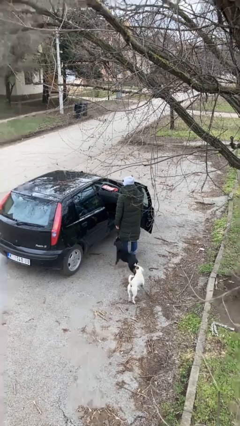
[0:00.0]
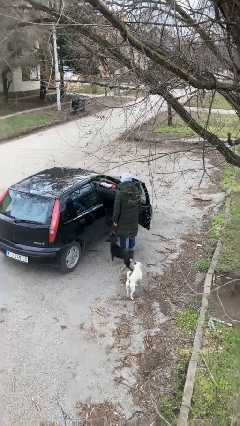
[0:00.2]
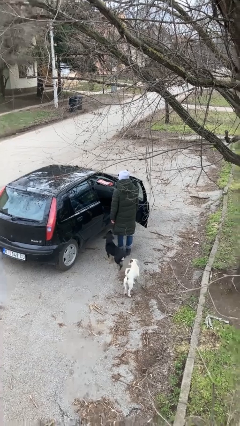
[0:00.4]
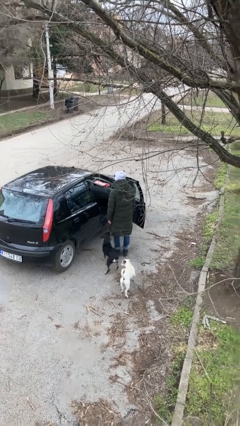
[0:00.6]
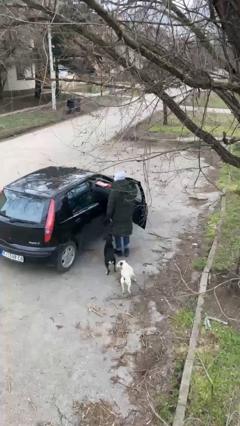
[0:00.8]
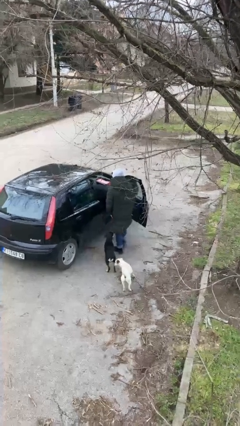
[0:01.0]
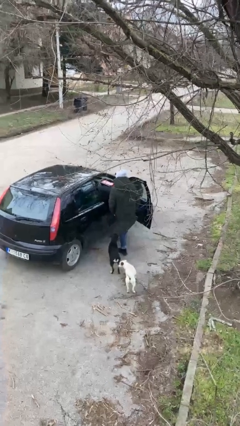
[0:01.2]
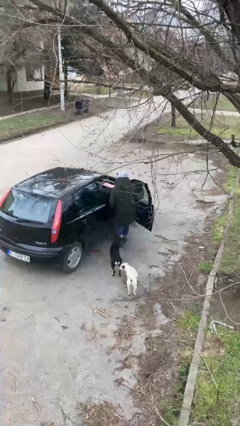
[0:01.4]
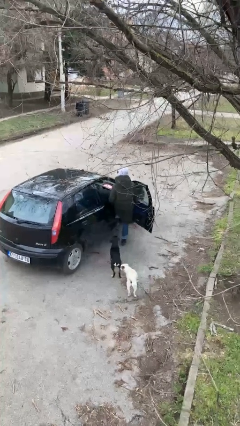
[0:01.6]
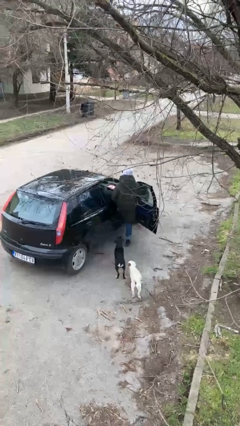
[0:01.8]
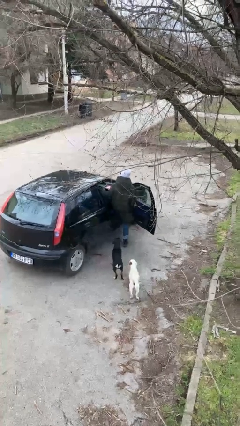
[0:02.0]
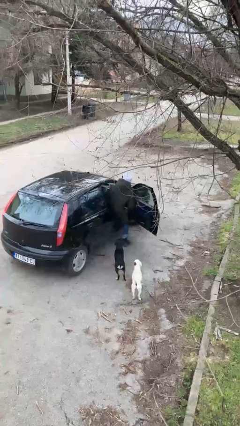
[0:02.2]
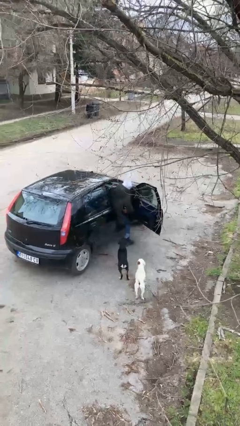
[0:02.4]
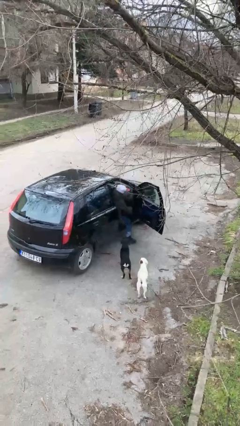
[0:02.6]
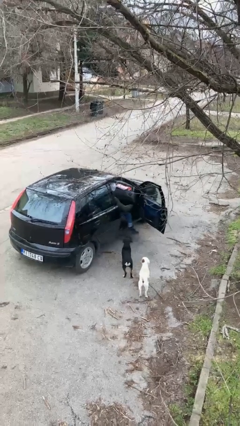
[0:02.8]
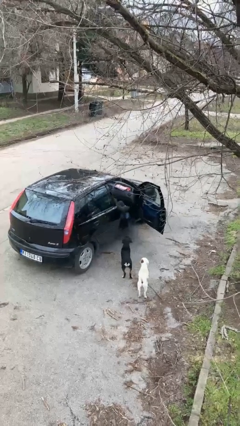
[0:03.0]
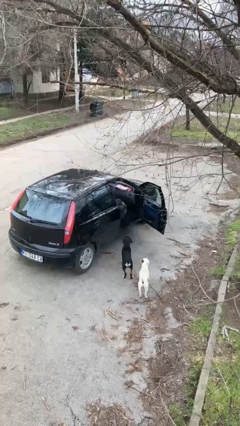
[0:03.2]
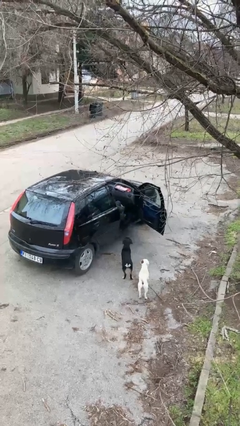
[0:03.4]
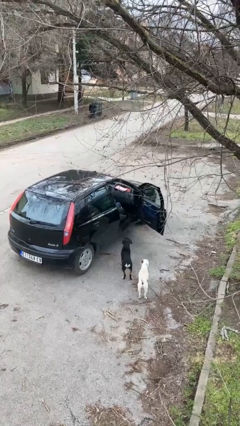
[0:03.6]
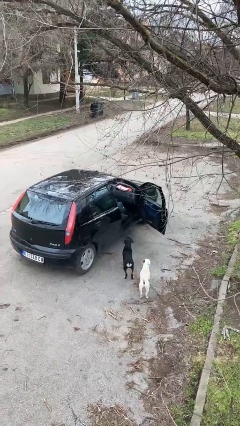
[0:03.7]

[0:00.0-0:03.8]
person enters car

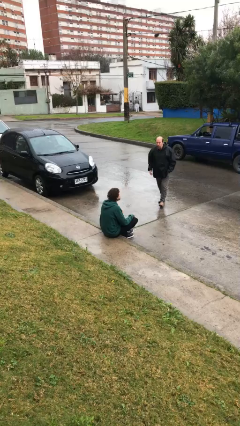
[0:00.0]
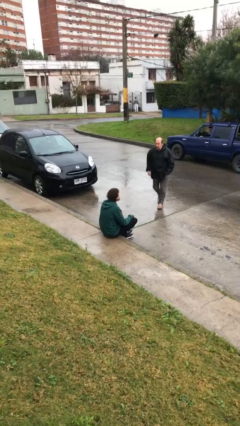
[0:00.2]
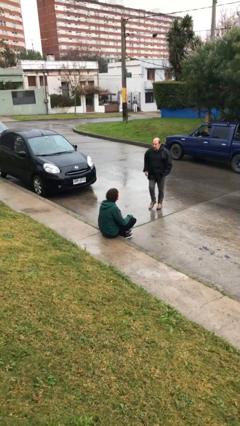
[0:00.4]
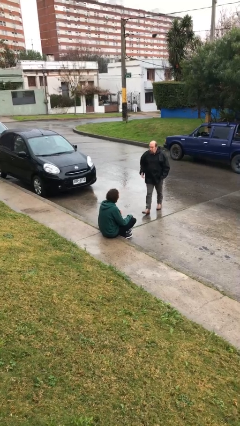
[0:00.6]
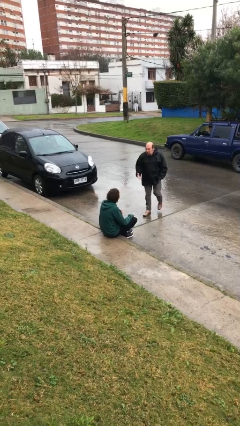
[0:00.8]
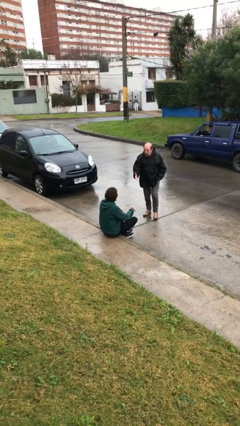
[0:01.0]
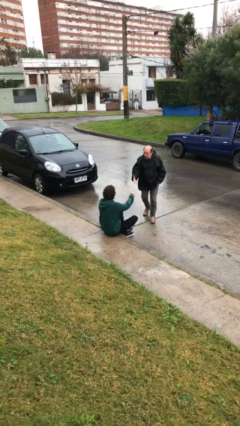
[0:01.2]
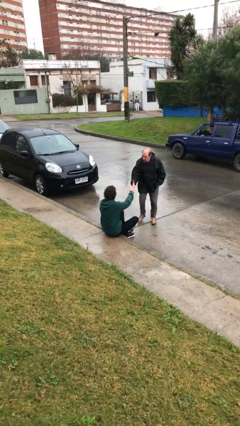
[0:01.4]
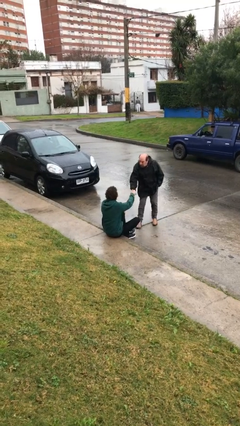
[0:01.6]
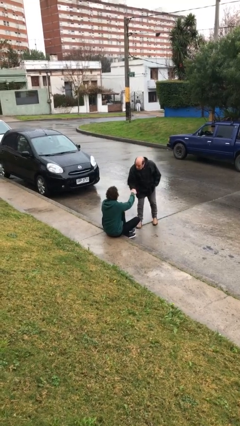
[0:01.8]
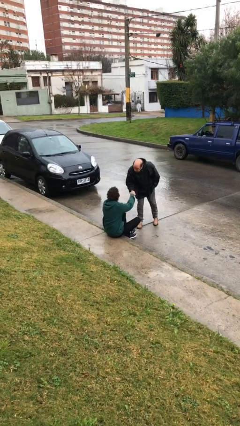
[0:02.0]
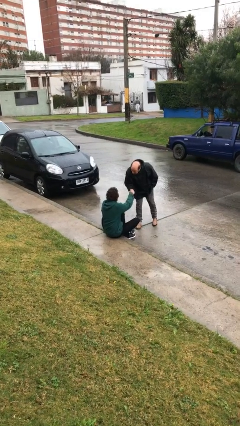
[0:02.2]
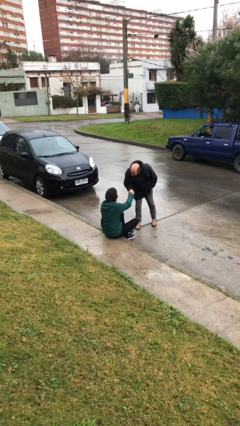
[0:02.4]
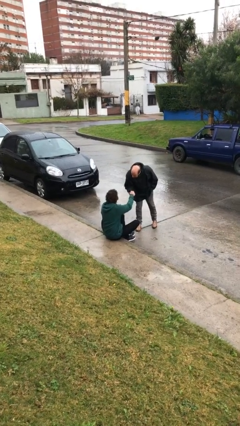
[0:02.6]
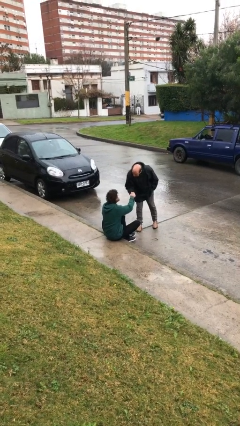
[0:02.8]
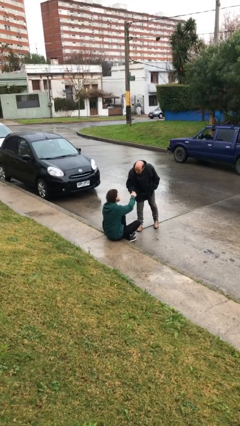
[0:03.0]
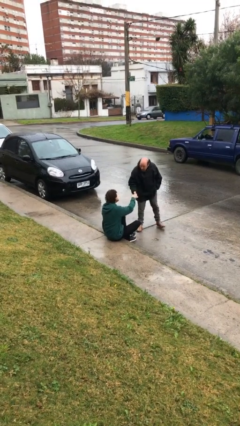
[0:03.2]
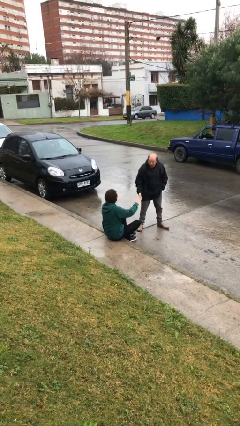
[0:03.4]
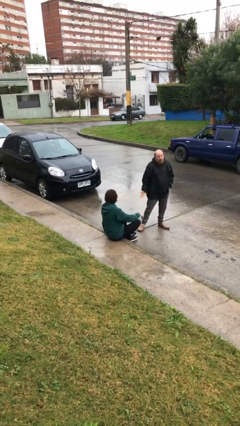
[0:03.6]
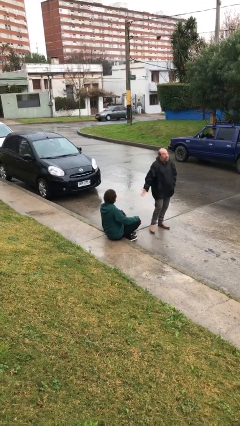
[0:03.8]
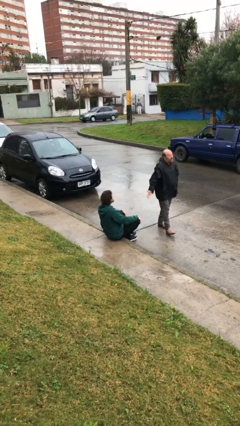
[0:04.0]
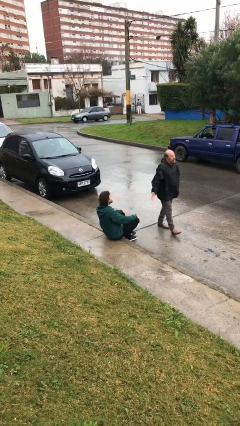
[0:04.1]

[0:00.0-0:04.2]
person shakes hand

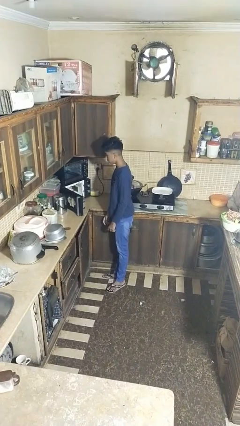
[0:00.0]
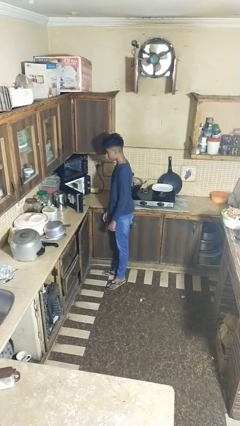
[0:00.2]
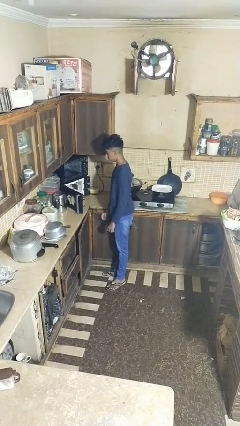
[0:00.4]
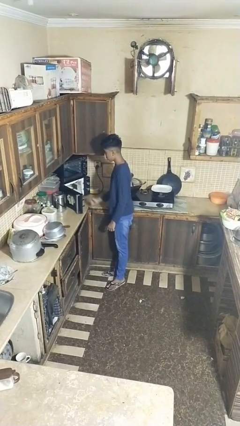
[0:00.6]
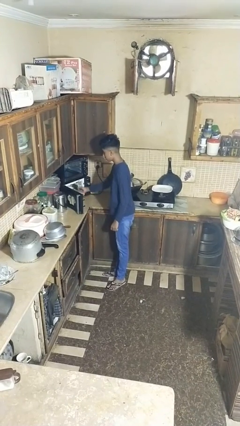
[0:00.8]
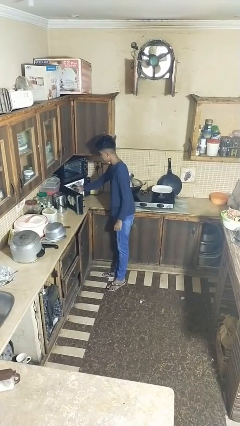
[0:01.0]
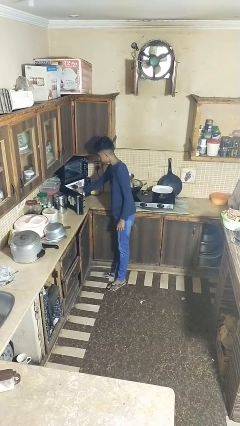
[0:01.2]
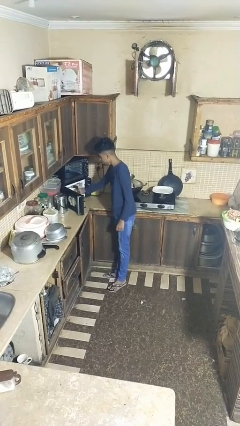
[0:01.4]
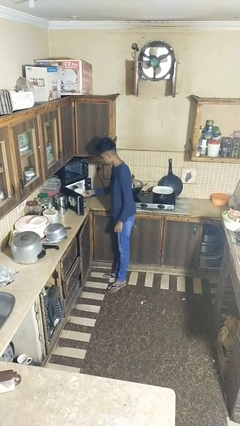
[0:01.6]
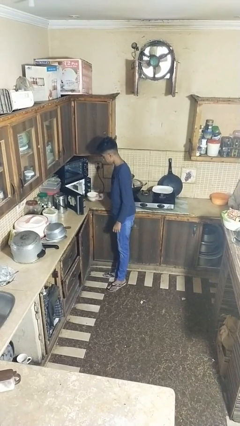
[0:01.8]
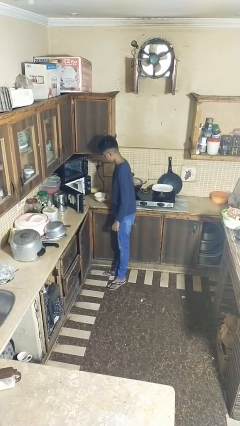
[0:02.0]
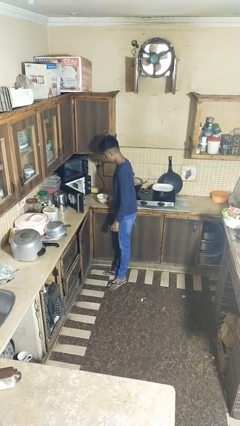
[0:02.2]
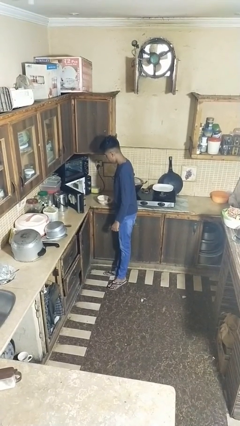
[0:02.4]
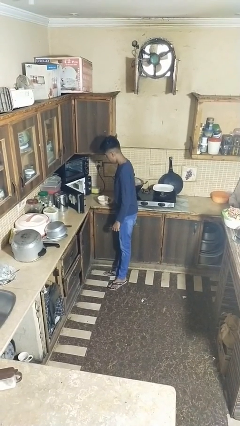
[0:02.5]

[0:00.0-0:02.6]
person takes object from microwave

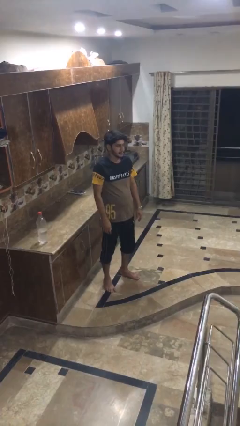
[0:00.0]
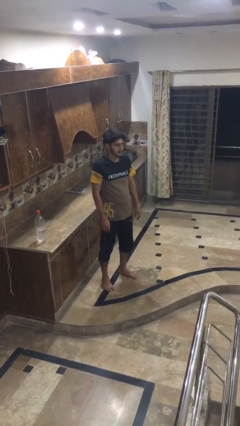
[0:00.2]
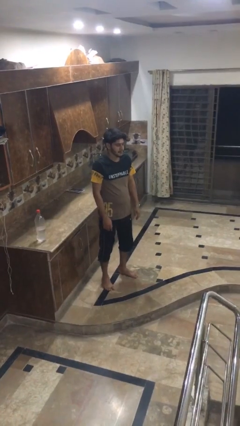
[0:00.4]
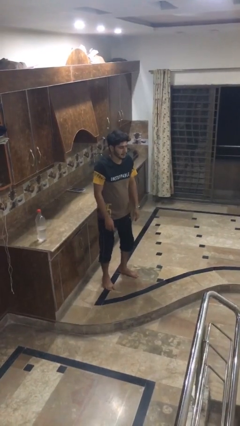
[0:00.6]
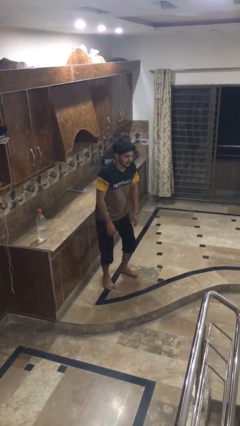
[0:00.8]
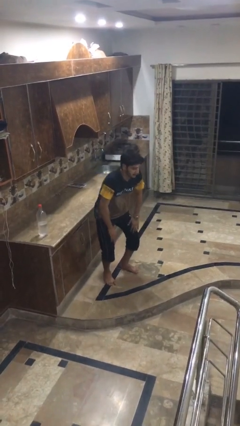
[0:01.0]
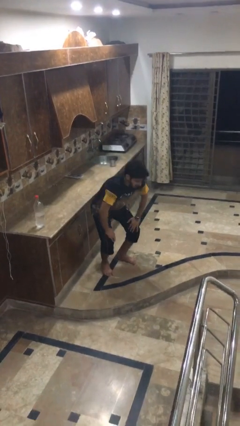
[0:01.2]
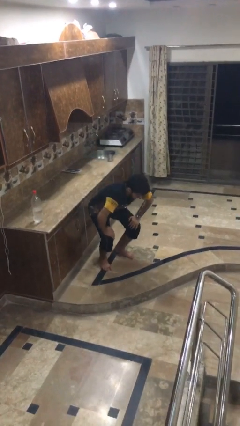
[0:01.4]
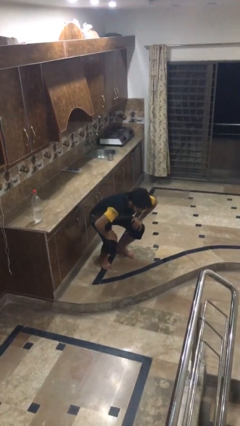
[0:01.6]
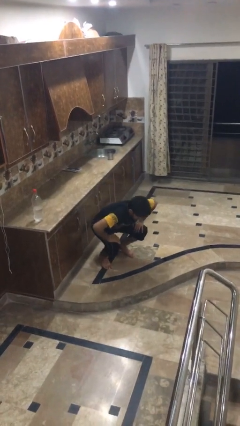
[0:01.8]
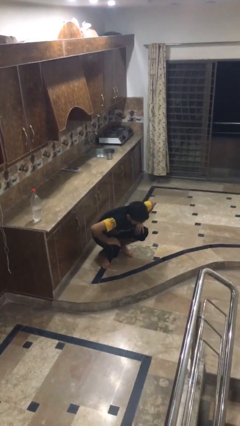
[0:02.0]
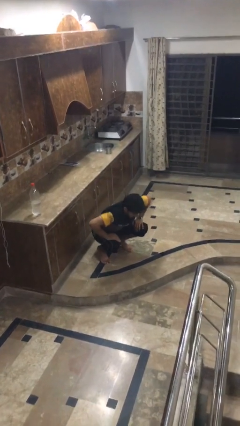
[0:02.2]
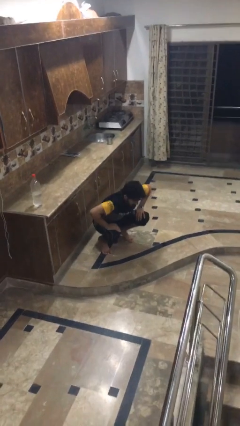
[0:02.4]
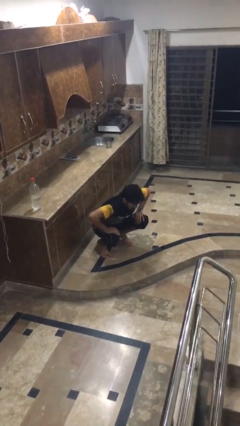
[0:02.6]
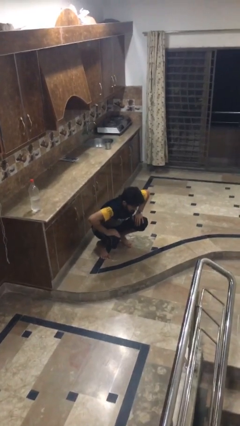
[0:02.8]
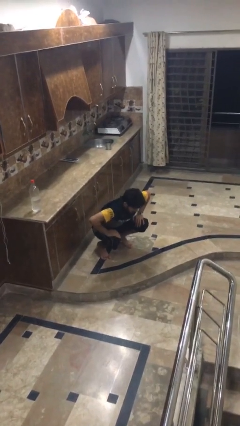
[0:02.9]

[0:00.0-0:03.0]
person squats

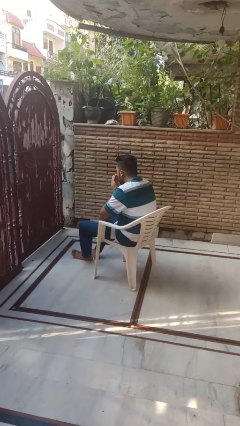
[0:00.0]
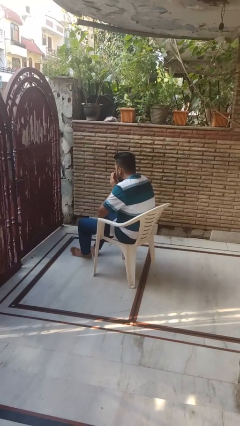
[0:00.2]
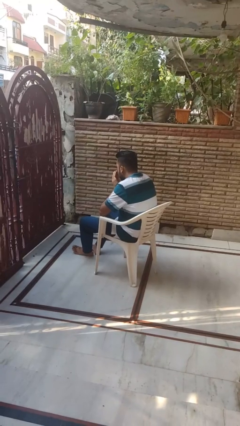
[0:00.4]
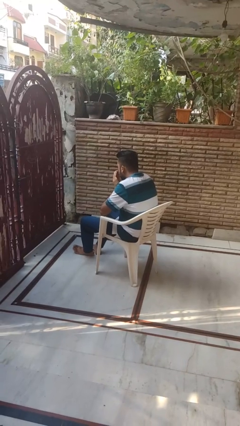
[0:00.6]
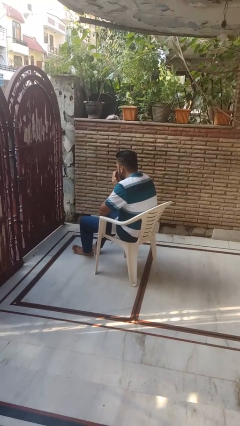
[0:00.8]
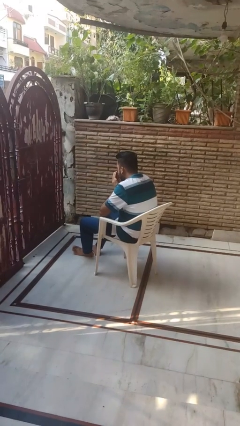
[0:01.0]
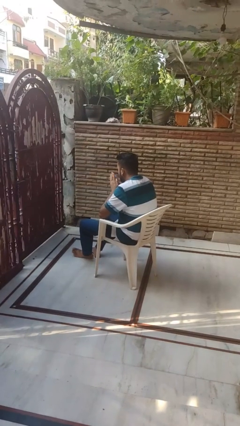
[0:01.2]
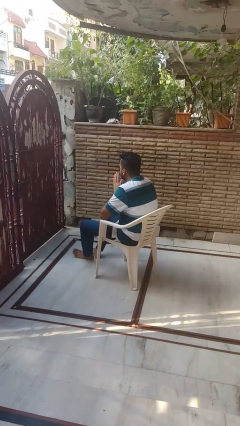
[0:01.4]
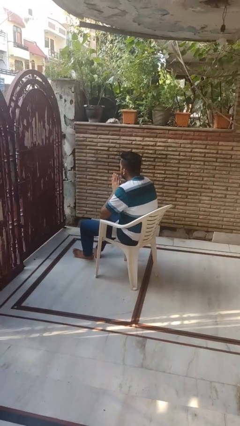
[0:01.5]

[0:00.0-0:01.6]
person blows into hands

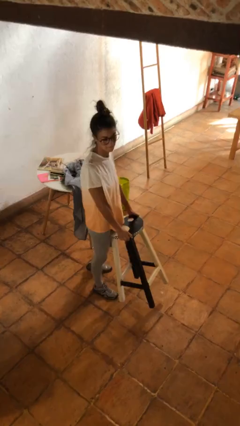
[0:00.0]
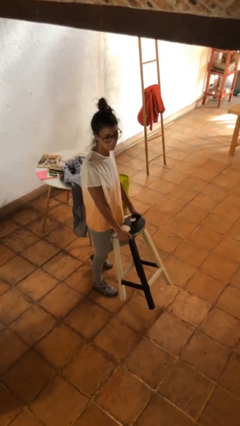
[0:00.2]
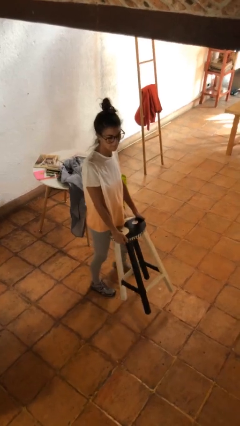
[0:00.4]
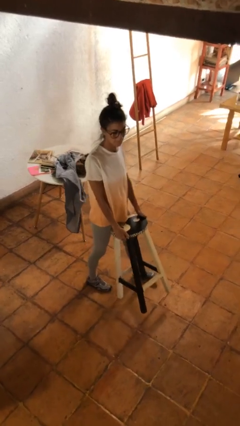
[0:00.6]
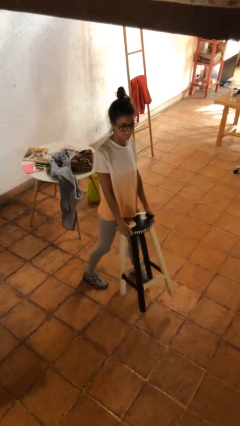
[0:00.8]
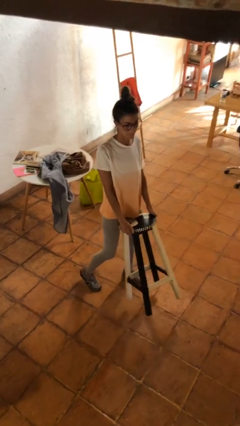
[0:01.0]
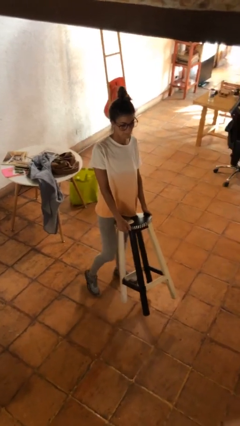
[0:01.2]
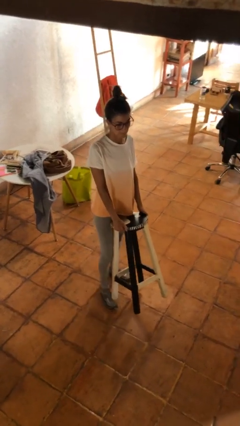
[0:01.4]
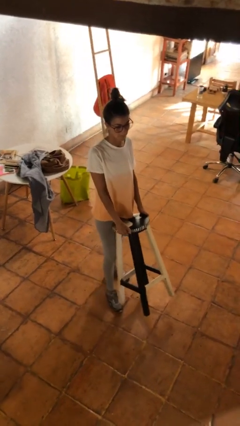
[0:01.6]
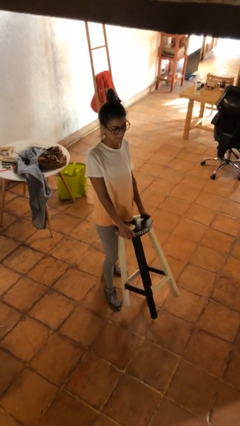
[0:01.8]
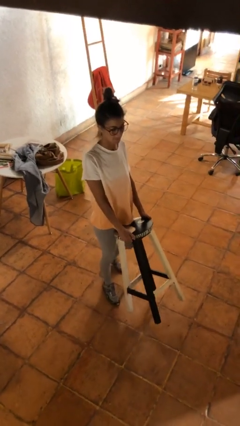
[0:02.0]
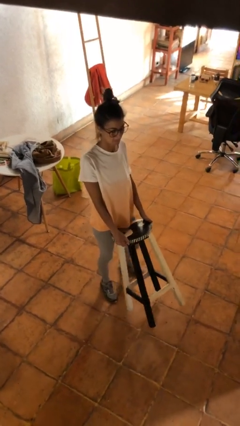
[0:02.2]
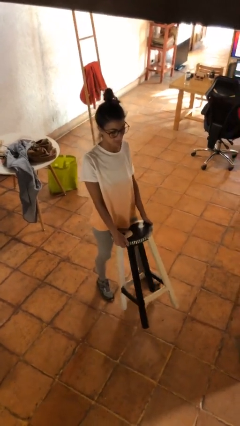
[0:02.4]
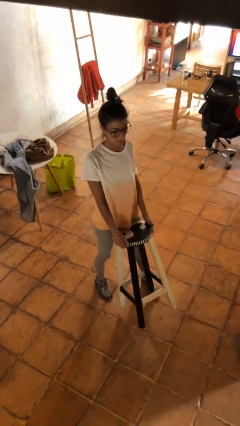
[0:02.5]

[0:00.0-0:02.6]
person carries furniture

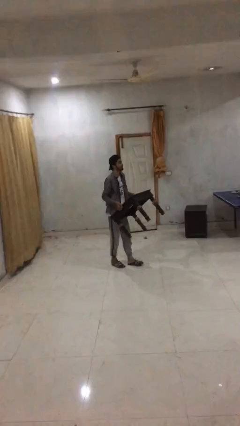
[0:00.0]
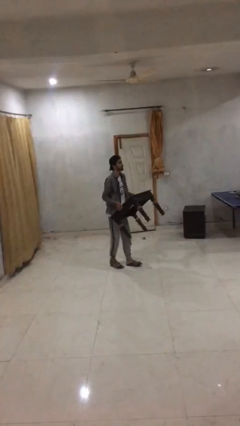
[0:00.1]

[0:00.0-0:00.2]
person puts down object on floor
